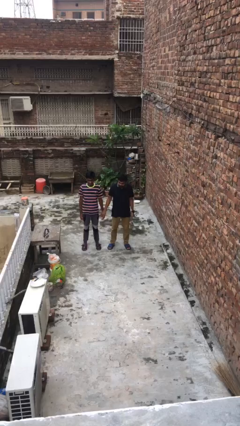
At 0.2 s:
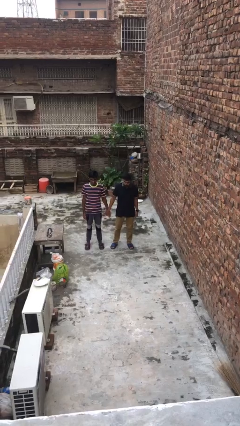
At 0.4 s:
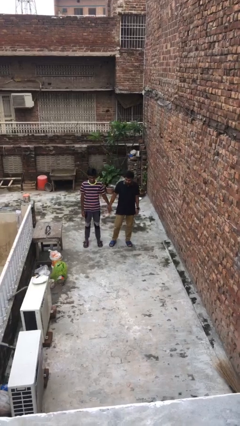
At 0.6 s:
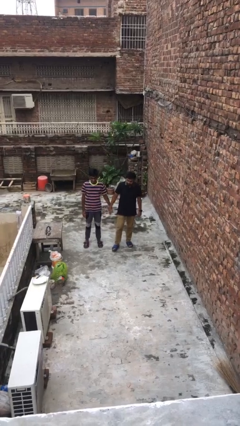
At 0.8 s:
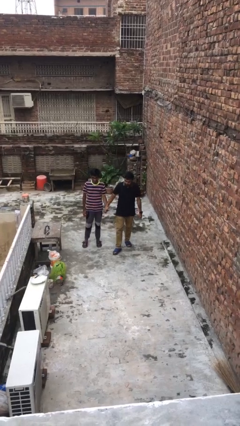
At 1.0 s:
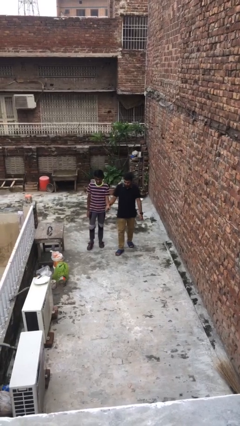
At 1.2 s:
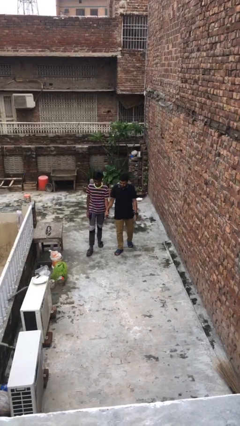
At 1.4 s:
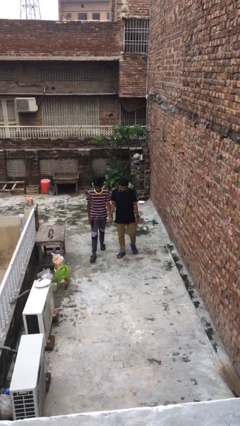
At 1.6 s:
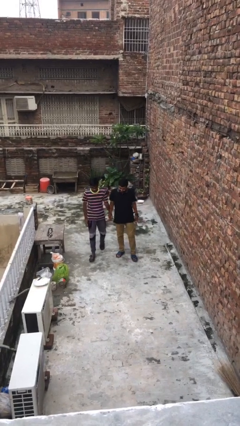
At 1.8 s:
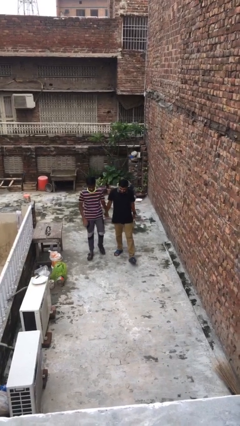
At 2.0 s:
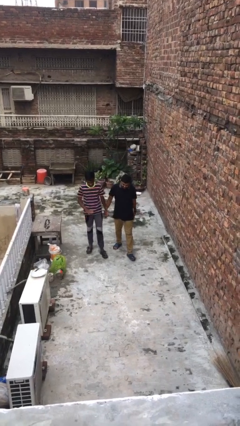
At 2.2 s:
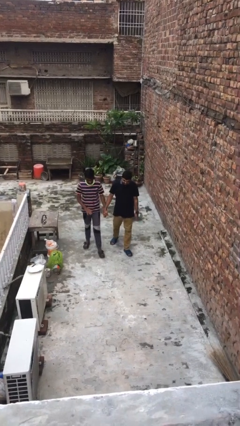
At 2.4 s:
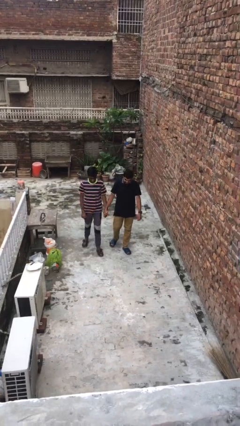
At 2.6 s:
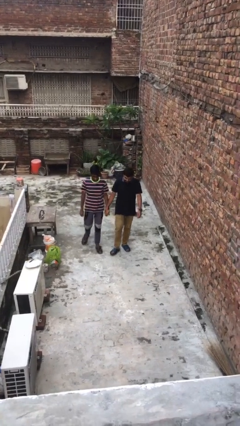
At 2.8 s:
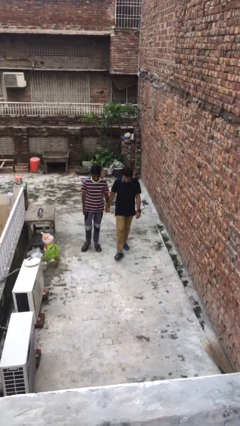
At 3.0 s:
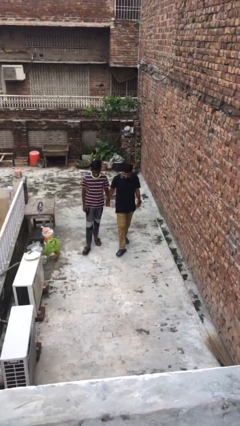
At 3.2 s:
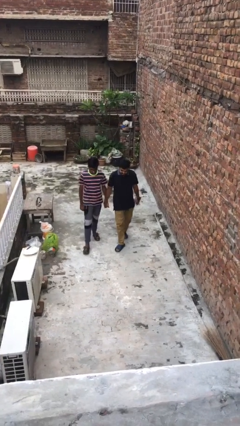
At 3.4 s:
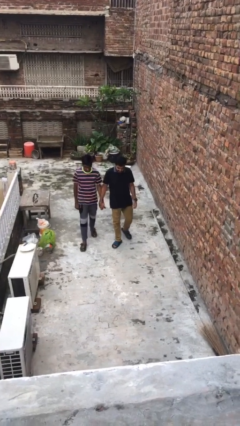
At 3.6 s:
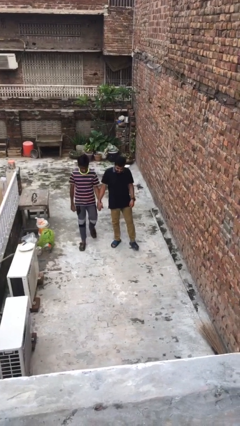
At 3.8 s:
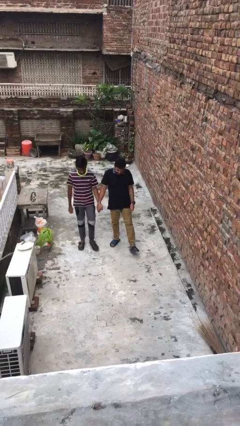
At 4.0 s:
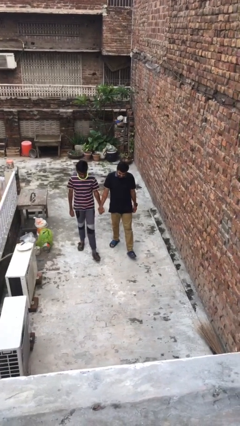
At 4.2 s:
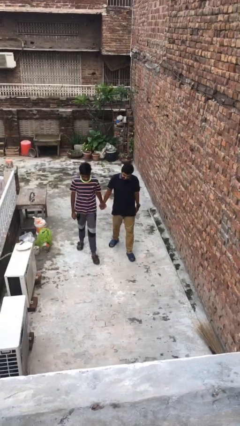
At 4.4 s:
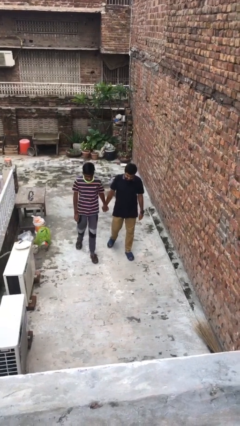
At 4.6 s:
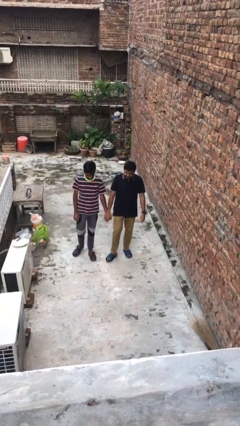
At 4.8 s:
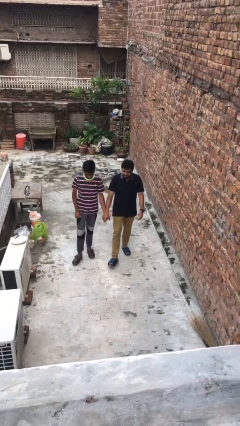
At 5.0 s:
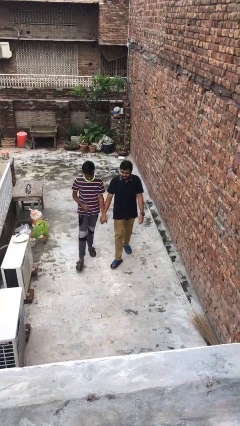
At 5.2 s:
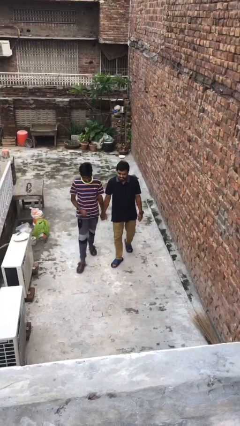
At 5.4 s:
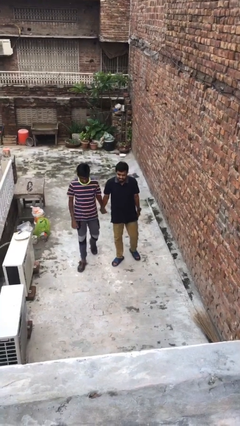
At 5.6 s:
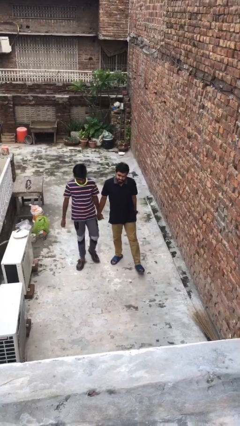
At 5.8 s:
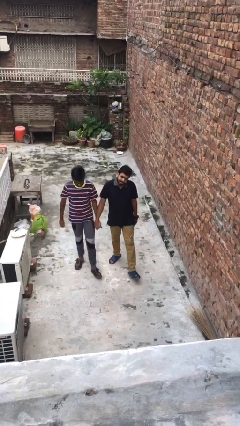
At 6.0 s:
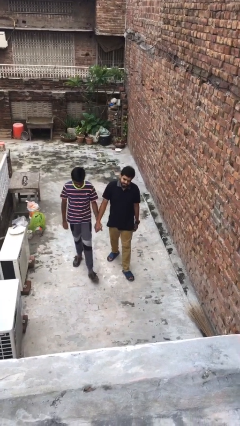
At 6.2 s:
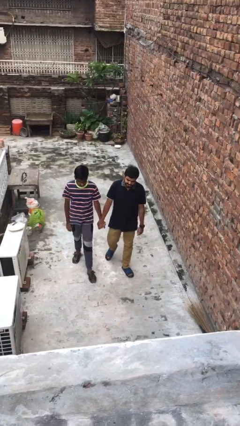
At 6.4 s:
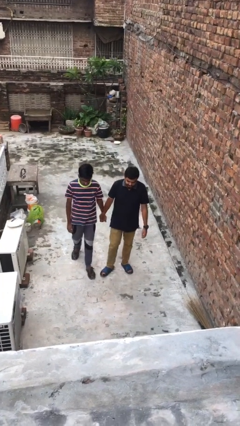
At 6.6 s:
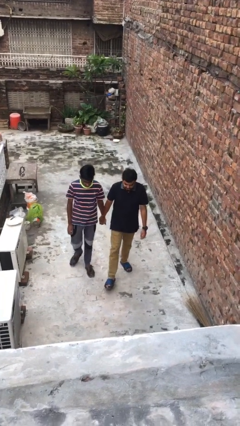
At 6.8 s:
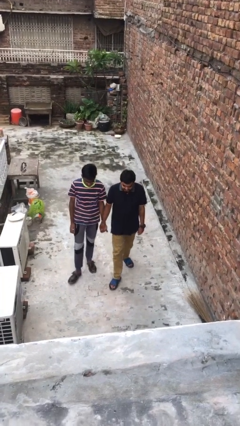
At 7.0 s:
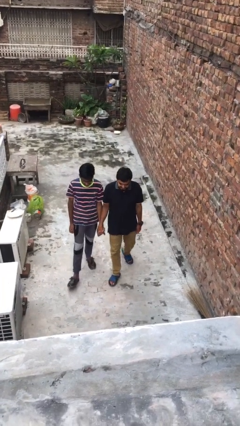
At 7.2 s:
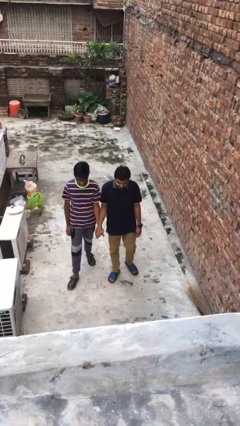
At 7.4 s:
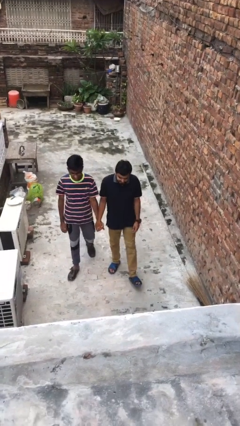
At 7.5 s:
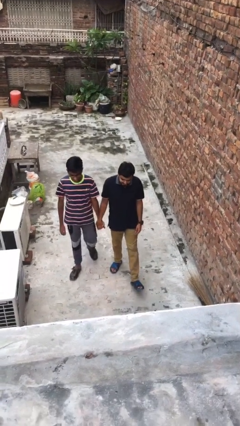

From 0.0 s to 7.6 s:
person holds hand

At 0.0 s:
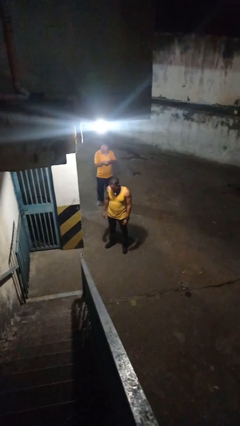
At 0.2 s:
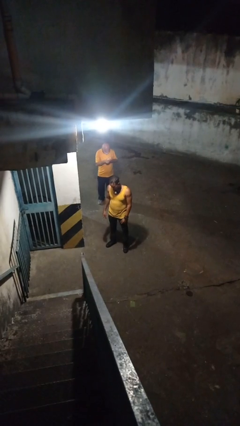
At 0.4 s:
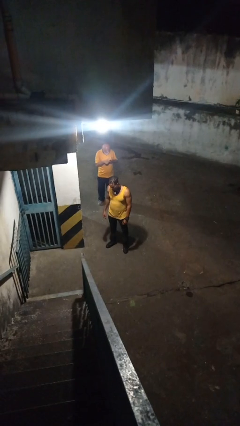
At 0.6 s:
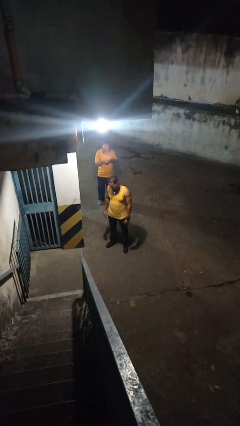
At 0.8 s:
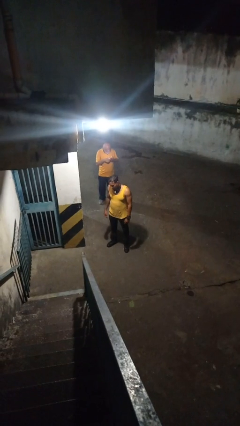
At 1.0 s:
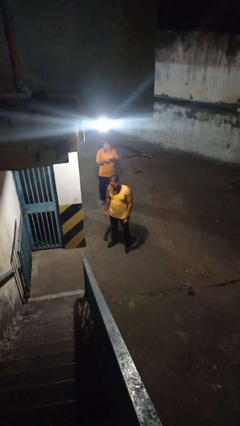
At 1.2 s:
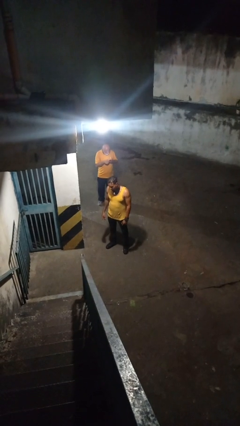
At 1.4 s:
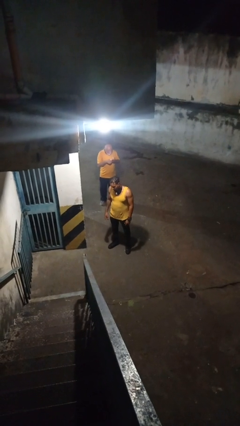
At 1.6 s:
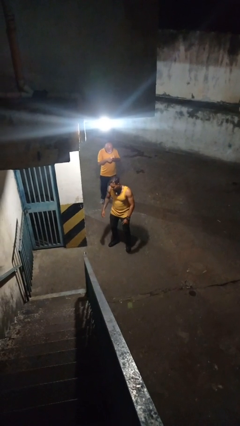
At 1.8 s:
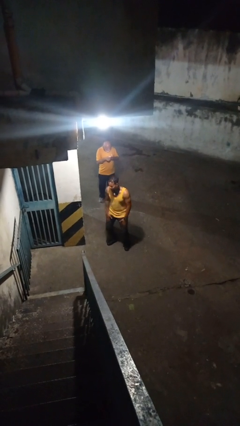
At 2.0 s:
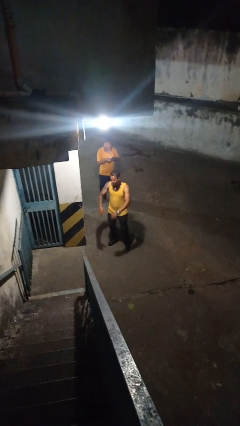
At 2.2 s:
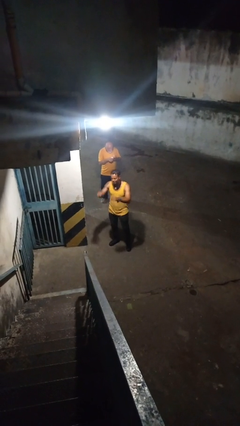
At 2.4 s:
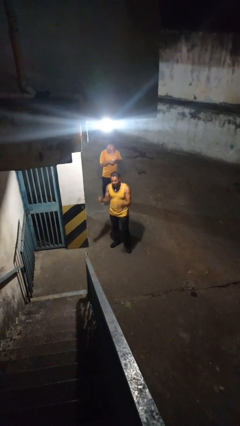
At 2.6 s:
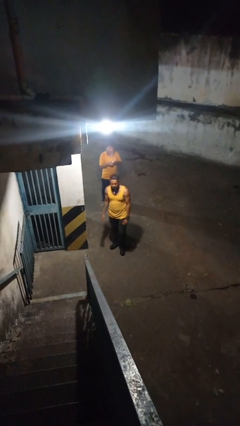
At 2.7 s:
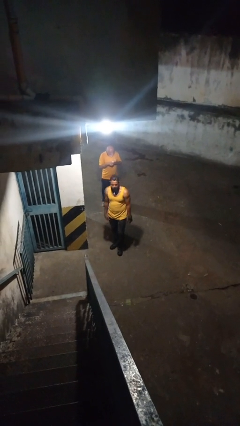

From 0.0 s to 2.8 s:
person slaps hands on thighs

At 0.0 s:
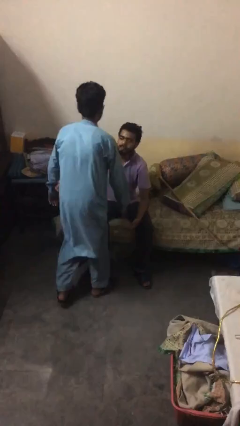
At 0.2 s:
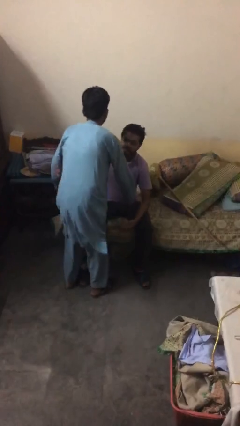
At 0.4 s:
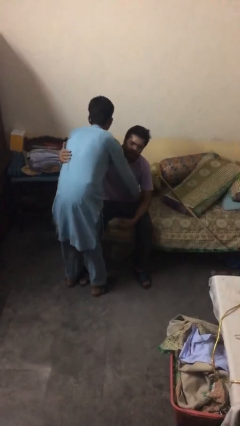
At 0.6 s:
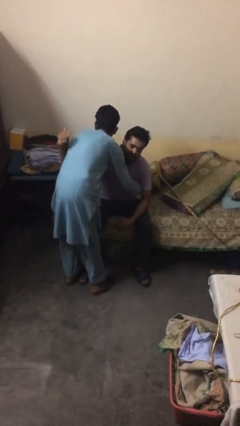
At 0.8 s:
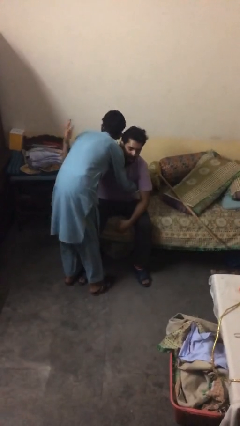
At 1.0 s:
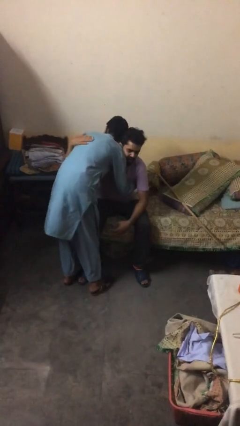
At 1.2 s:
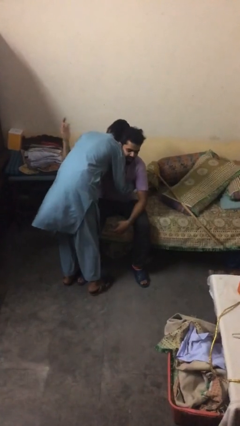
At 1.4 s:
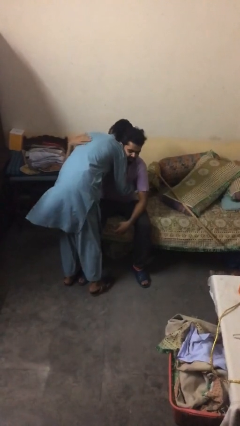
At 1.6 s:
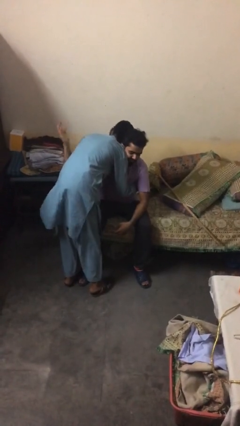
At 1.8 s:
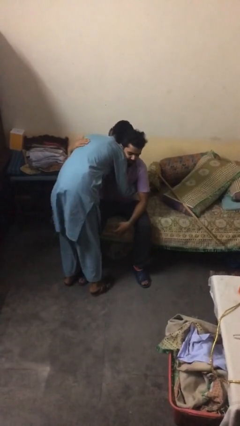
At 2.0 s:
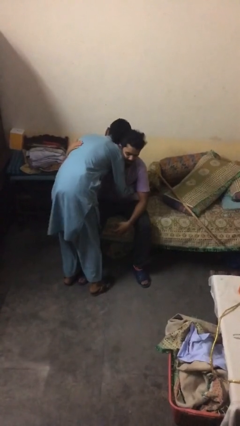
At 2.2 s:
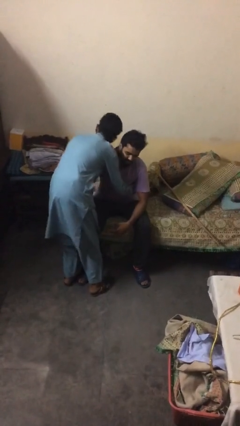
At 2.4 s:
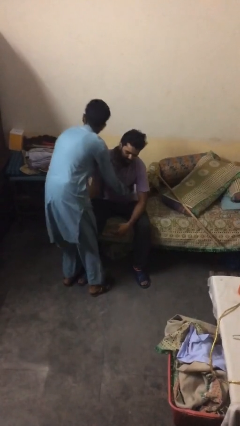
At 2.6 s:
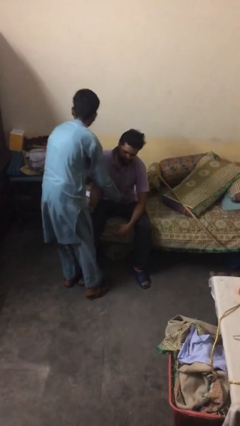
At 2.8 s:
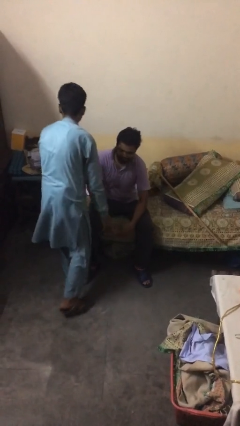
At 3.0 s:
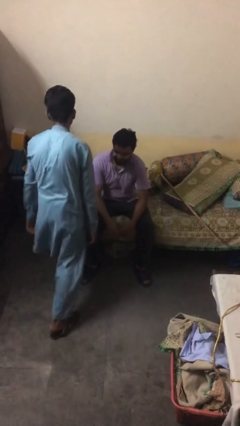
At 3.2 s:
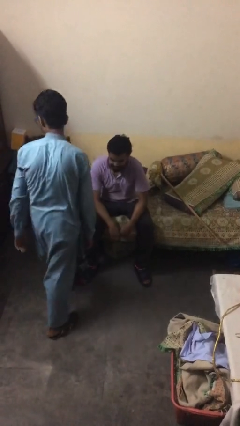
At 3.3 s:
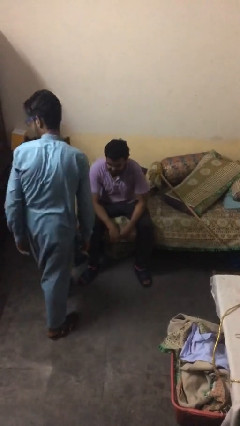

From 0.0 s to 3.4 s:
person embraces person

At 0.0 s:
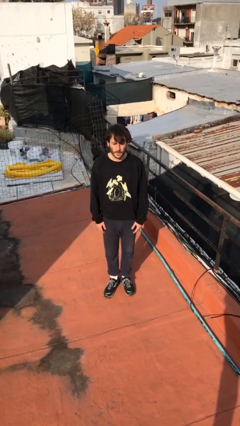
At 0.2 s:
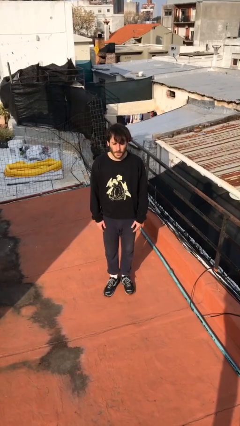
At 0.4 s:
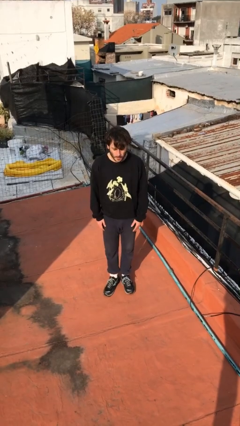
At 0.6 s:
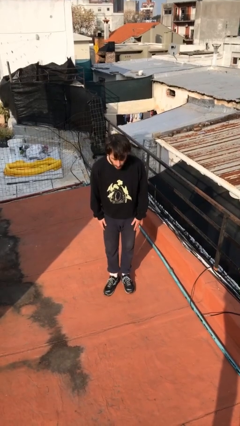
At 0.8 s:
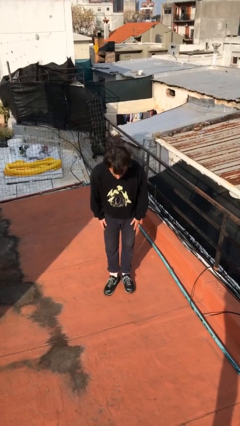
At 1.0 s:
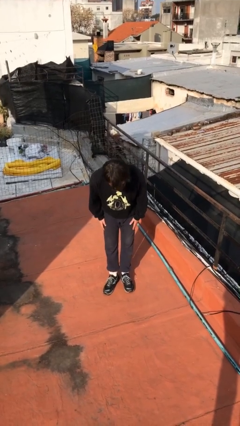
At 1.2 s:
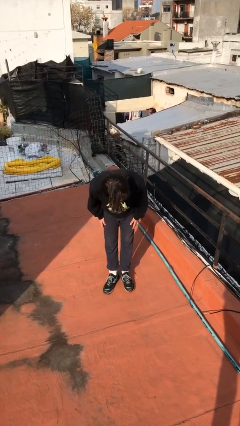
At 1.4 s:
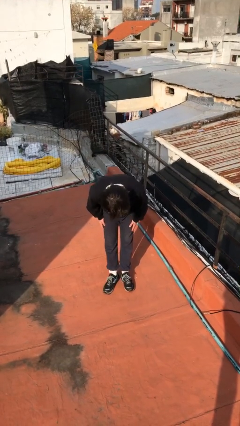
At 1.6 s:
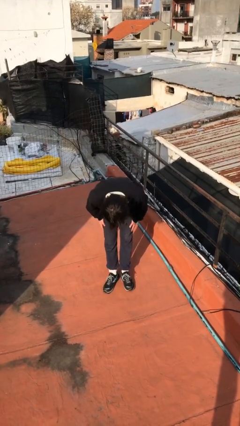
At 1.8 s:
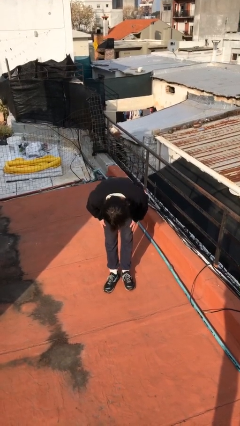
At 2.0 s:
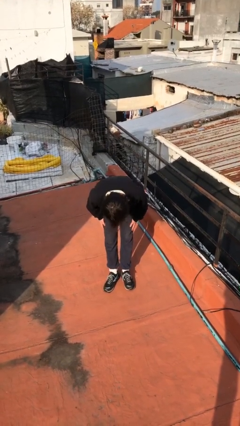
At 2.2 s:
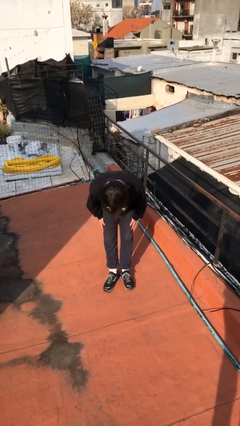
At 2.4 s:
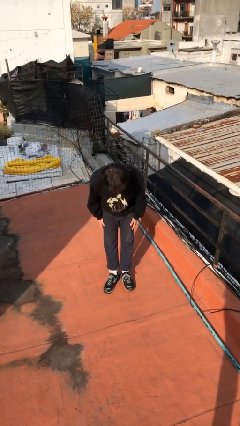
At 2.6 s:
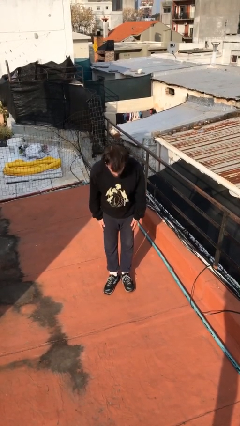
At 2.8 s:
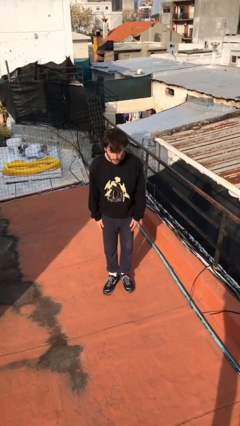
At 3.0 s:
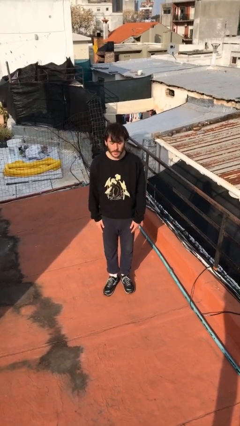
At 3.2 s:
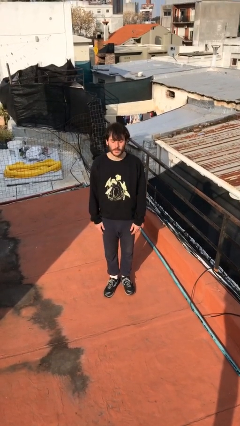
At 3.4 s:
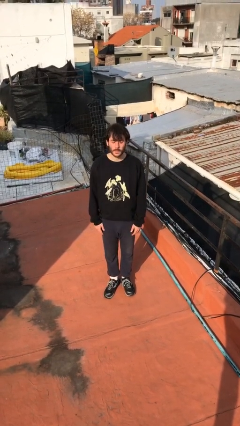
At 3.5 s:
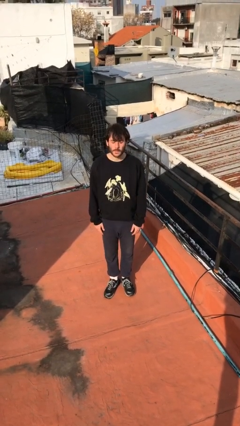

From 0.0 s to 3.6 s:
person bows

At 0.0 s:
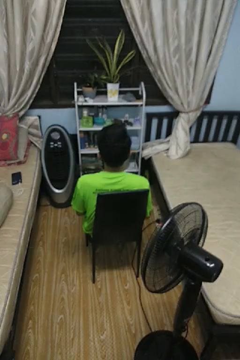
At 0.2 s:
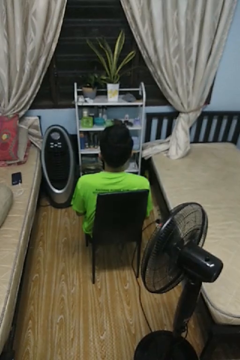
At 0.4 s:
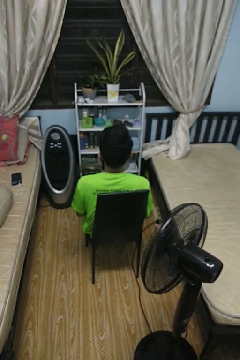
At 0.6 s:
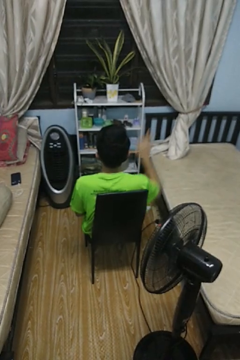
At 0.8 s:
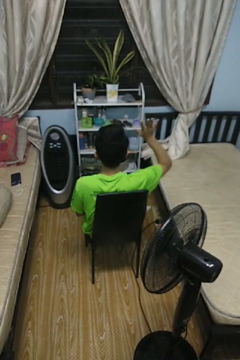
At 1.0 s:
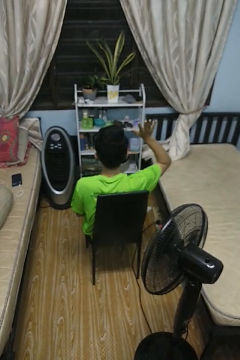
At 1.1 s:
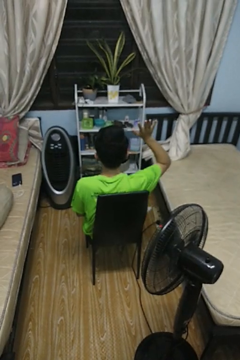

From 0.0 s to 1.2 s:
person gestures number five
